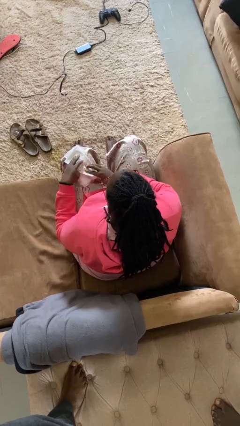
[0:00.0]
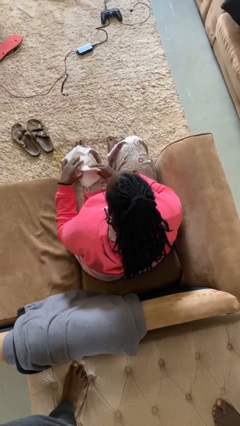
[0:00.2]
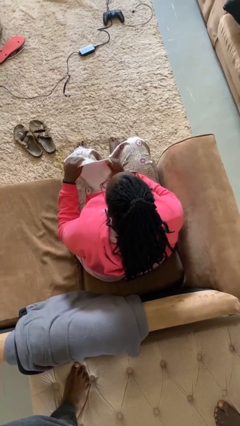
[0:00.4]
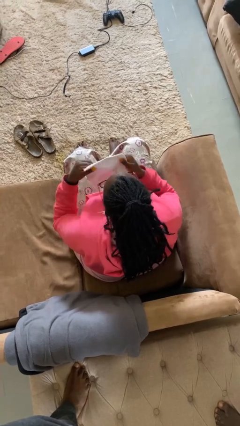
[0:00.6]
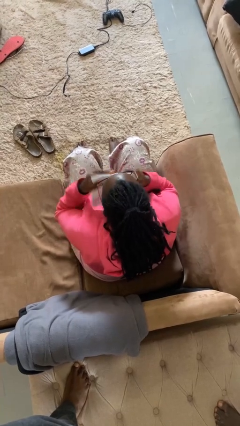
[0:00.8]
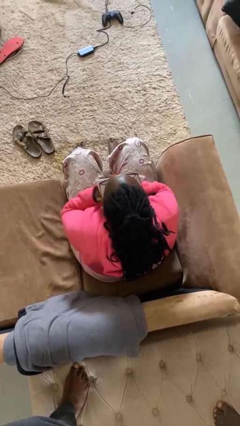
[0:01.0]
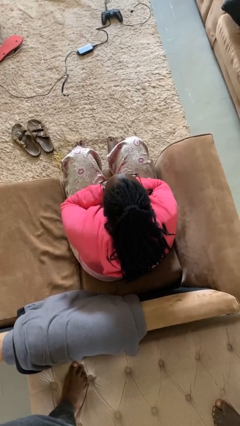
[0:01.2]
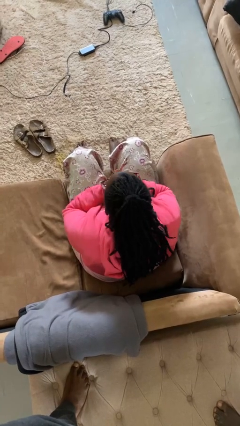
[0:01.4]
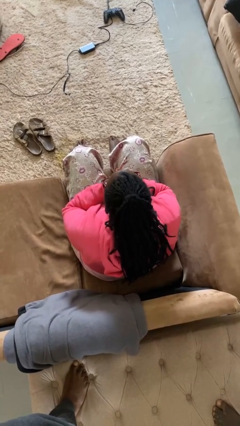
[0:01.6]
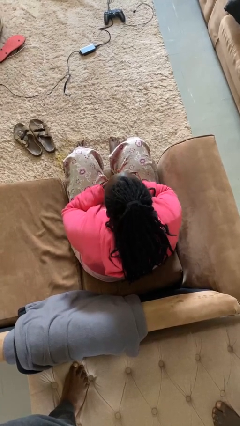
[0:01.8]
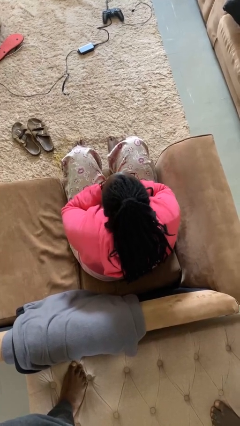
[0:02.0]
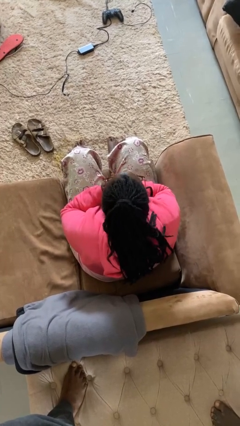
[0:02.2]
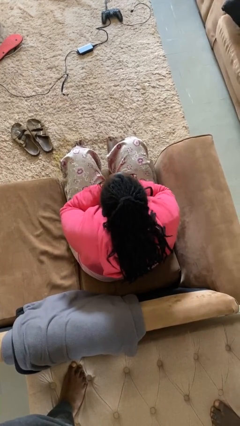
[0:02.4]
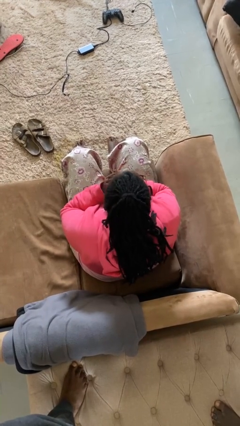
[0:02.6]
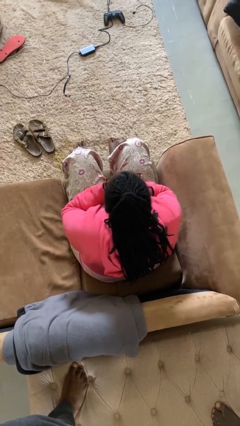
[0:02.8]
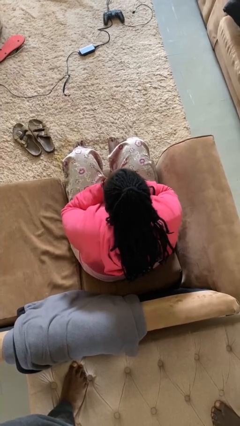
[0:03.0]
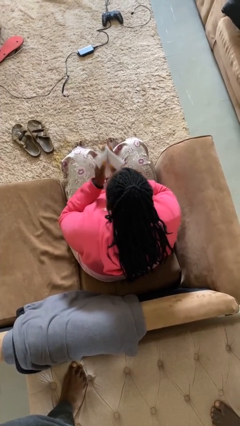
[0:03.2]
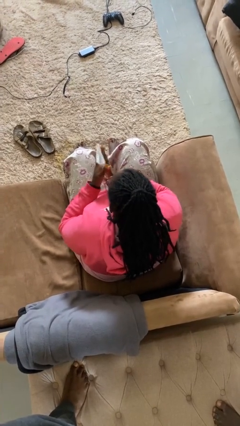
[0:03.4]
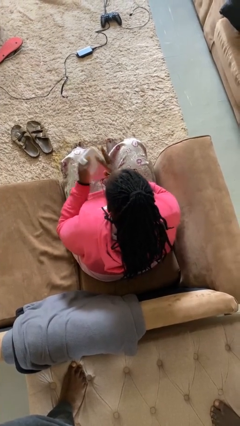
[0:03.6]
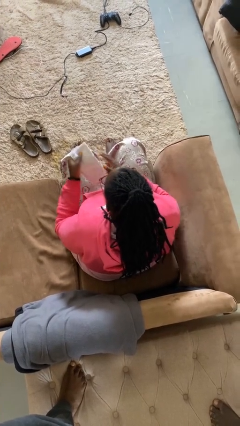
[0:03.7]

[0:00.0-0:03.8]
person blows nose

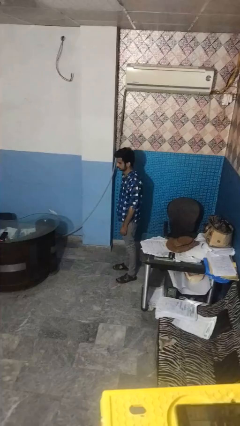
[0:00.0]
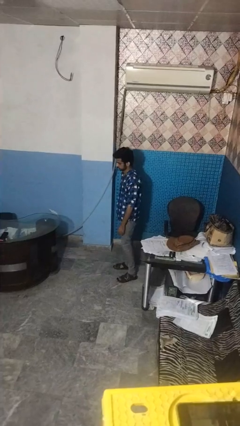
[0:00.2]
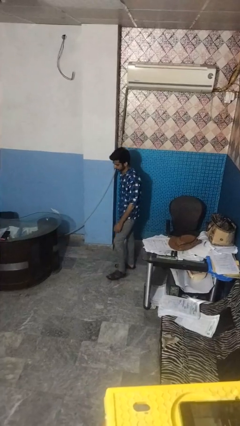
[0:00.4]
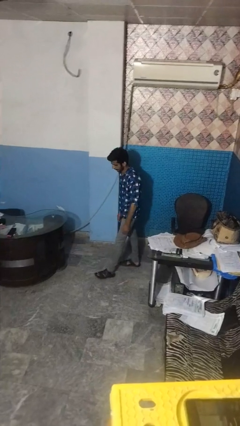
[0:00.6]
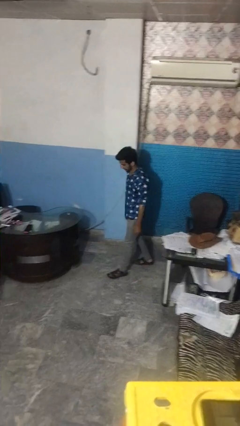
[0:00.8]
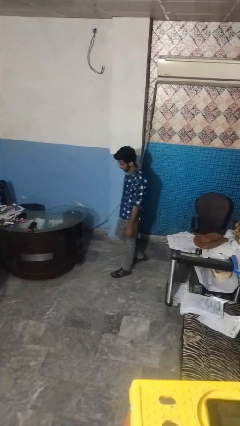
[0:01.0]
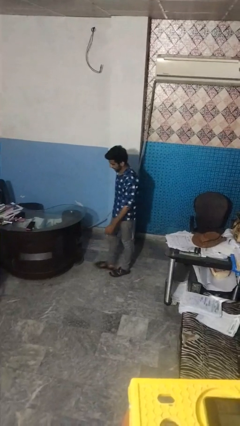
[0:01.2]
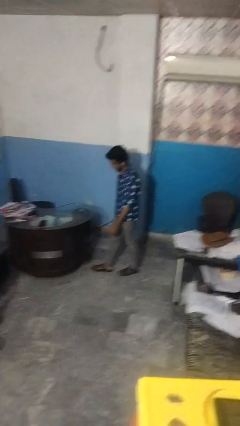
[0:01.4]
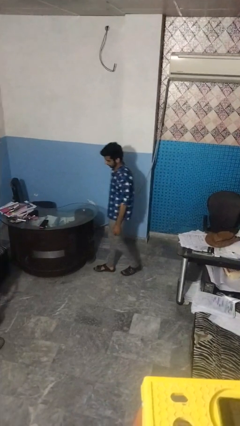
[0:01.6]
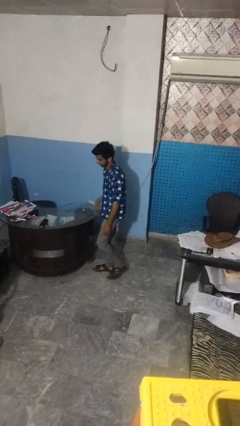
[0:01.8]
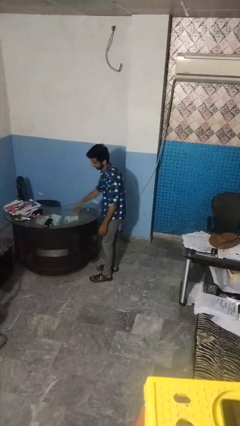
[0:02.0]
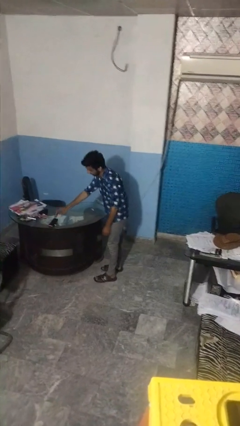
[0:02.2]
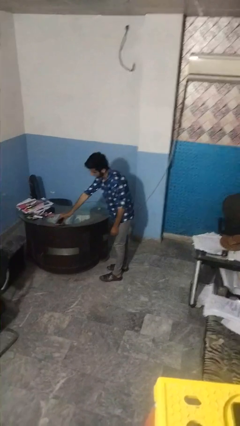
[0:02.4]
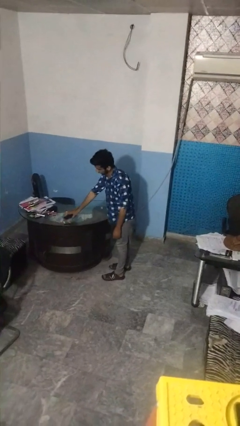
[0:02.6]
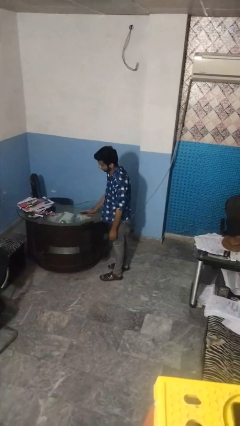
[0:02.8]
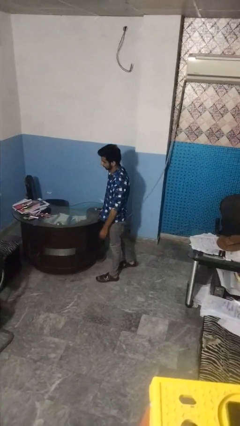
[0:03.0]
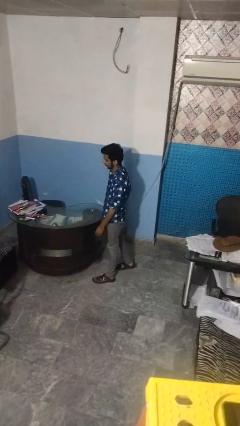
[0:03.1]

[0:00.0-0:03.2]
person picks up object from table

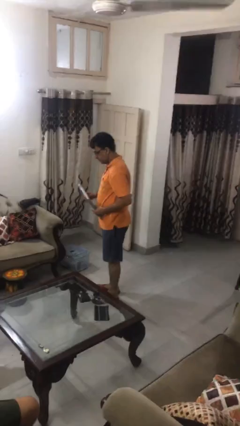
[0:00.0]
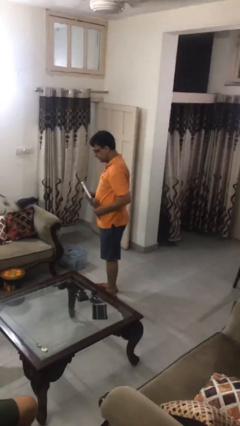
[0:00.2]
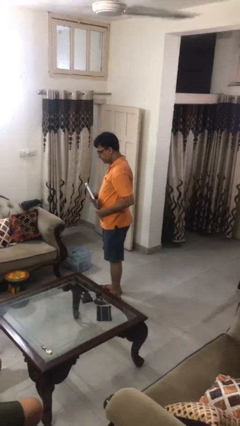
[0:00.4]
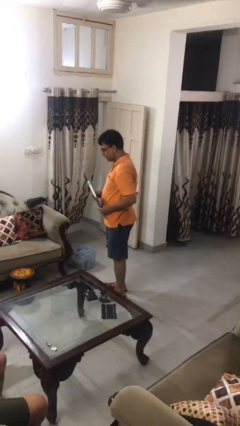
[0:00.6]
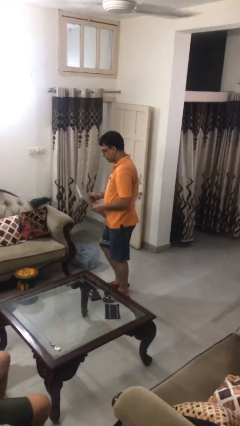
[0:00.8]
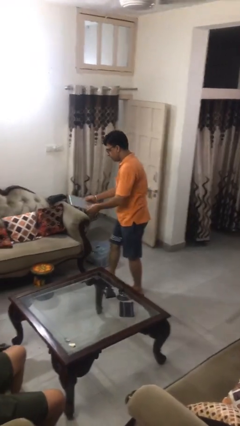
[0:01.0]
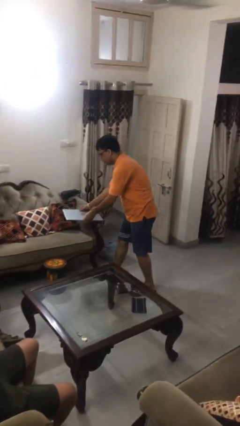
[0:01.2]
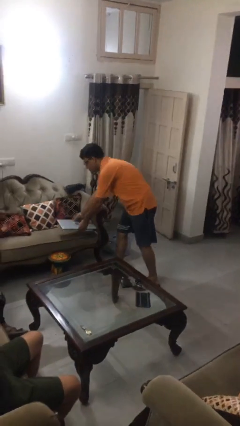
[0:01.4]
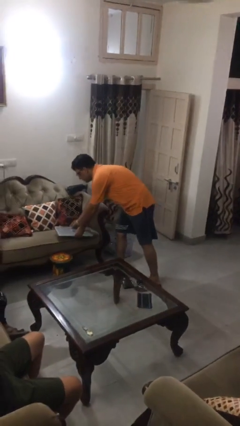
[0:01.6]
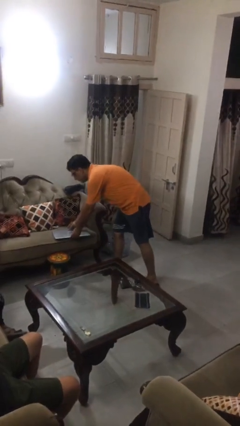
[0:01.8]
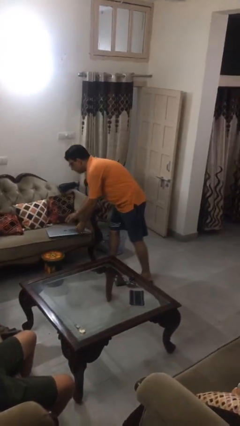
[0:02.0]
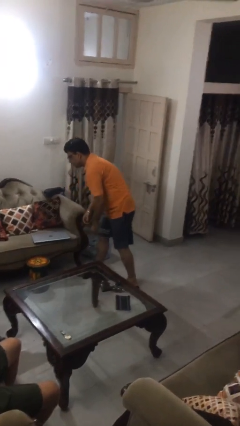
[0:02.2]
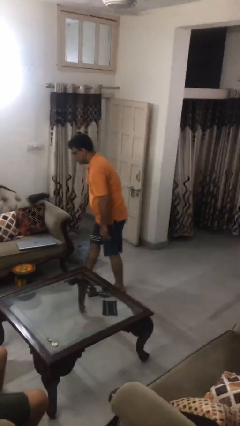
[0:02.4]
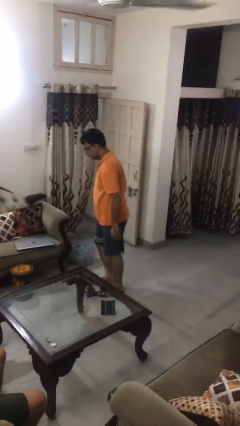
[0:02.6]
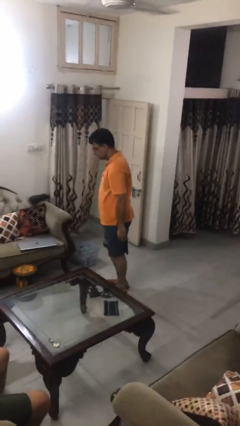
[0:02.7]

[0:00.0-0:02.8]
person puts down object on couch

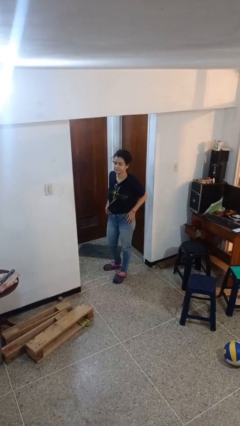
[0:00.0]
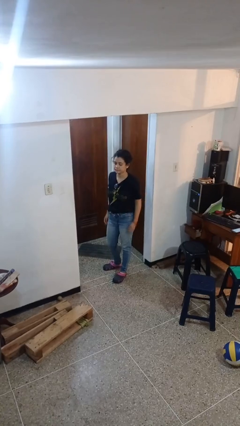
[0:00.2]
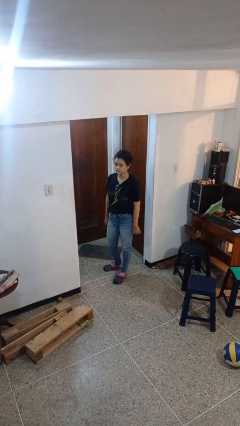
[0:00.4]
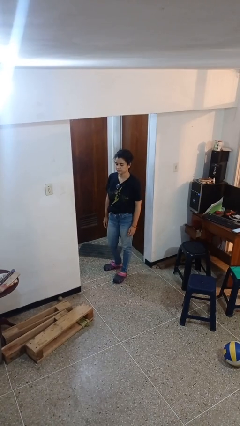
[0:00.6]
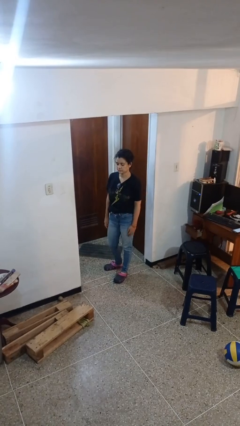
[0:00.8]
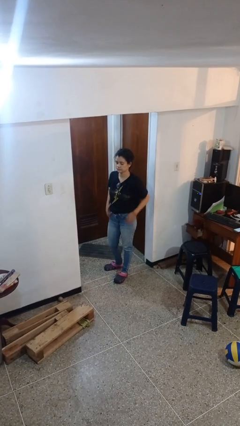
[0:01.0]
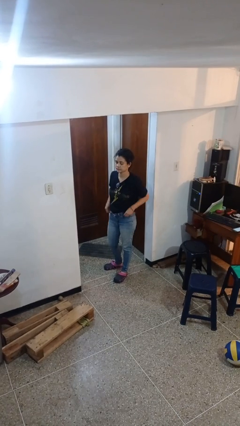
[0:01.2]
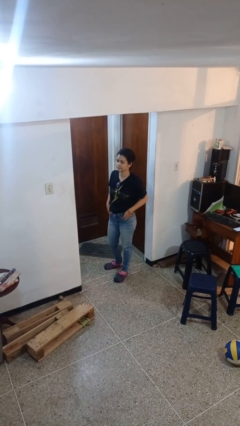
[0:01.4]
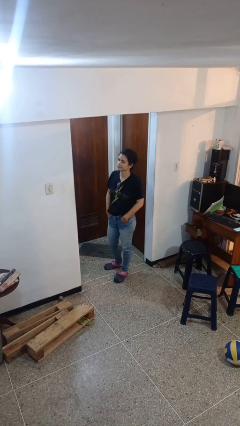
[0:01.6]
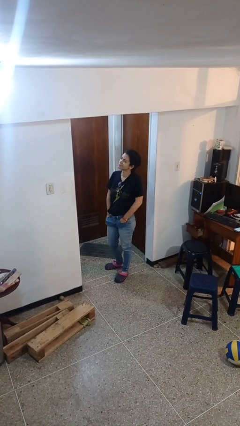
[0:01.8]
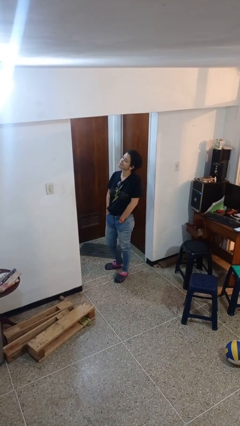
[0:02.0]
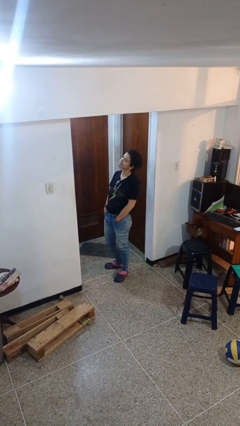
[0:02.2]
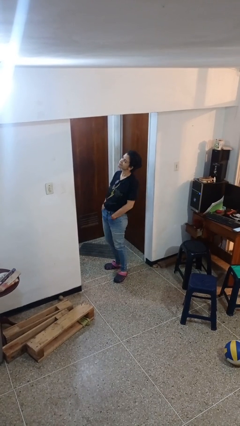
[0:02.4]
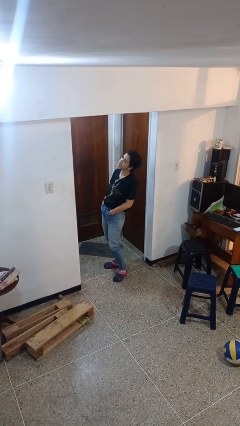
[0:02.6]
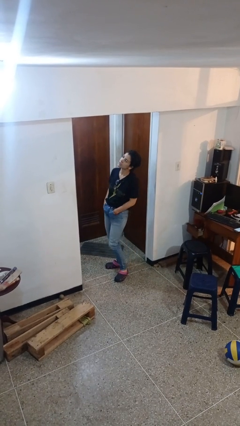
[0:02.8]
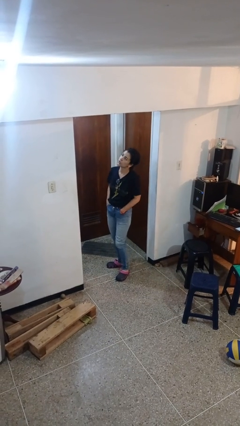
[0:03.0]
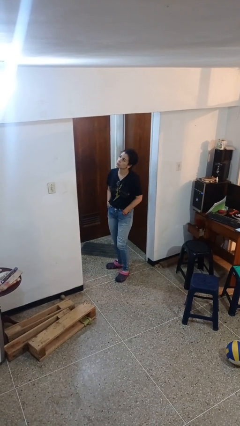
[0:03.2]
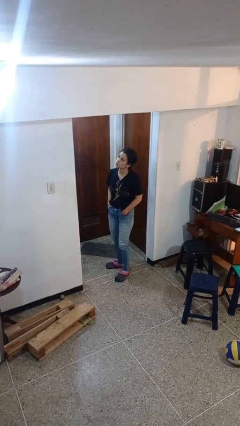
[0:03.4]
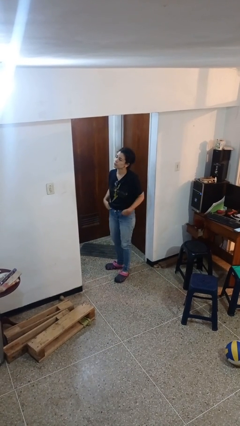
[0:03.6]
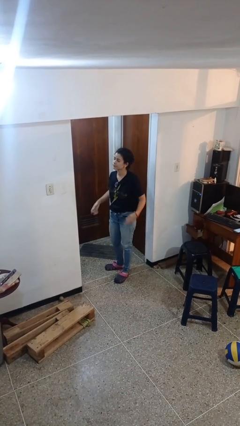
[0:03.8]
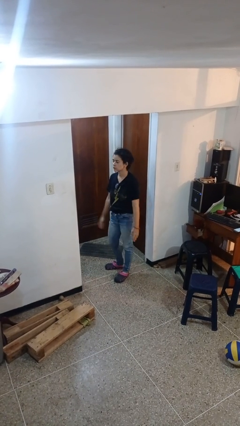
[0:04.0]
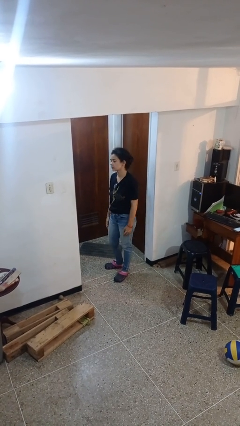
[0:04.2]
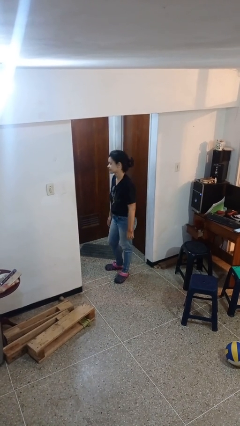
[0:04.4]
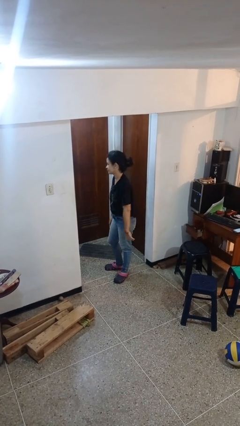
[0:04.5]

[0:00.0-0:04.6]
person puts hands in back pockets

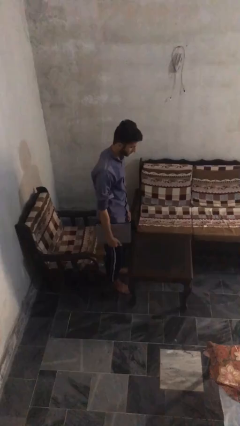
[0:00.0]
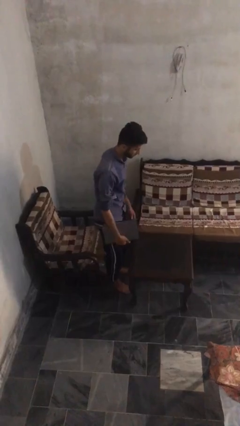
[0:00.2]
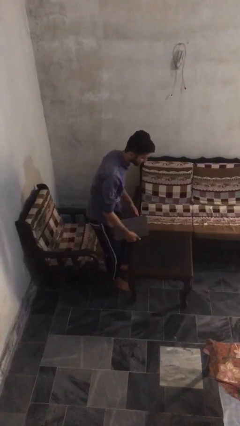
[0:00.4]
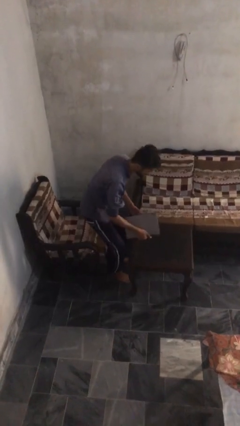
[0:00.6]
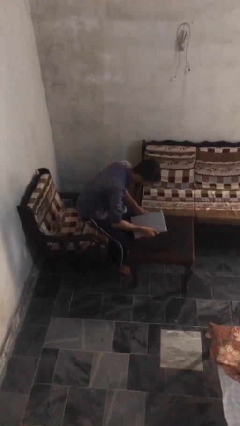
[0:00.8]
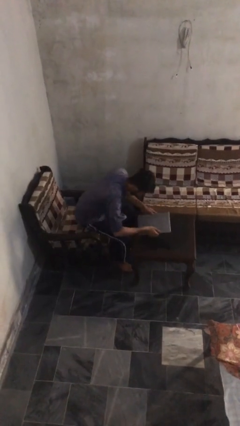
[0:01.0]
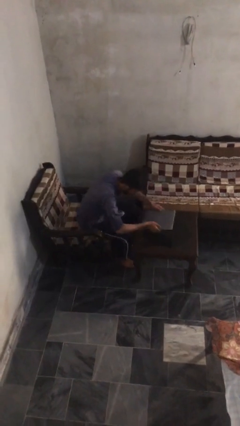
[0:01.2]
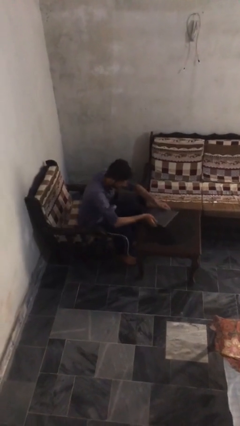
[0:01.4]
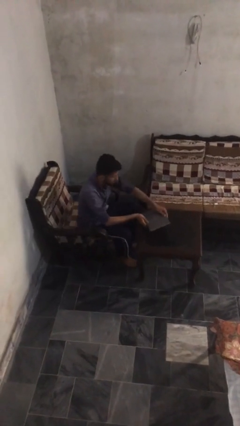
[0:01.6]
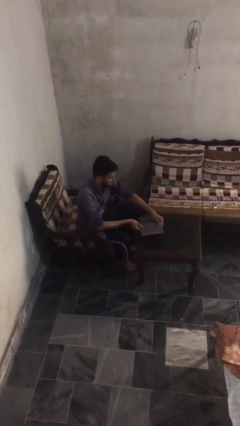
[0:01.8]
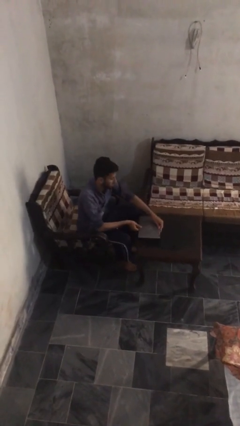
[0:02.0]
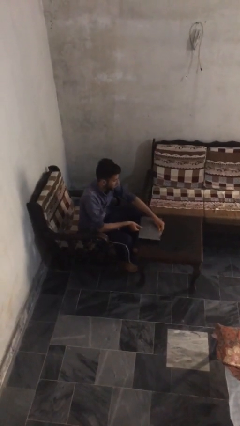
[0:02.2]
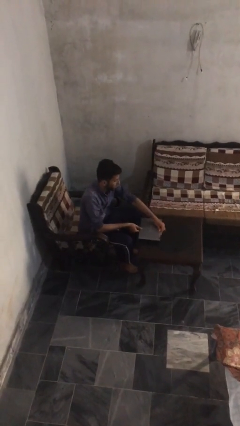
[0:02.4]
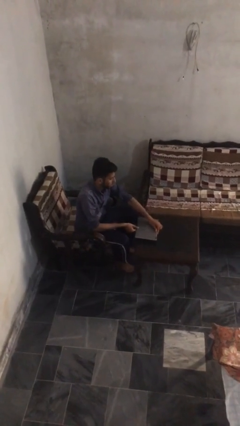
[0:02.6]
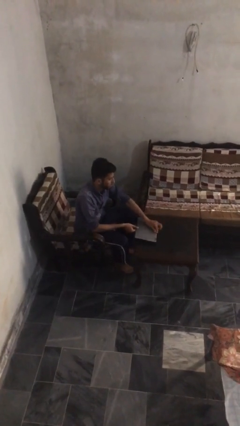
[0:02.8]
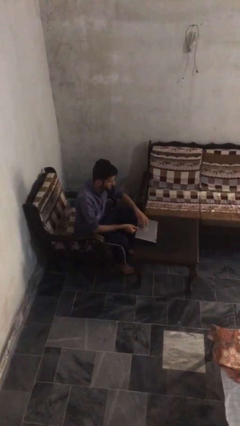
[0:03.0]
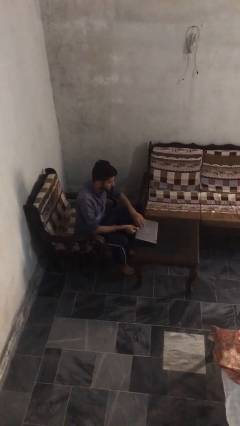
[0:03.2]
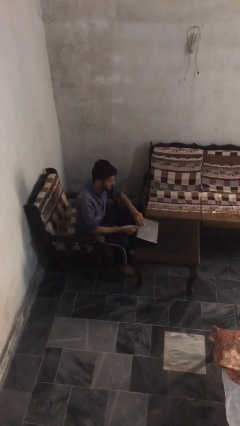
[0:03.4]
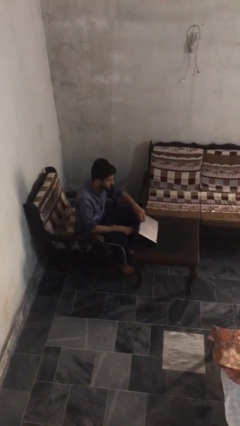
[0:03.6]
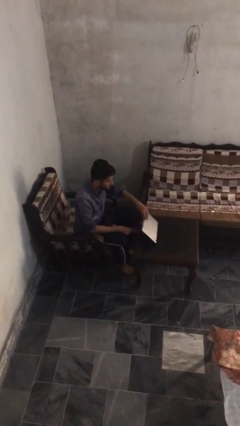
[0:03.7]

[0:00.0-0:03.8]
person sits down
